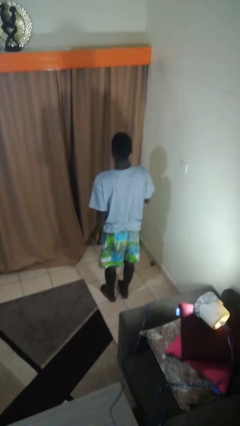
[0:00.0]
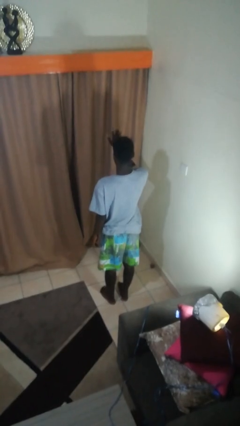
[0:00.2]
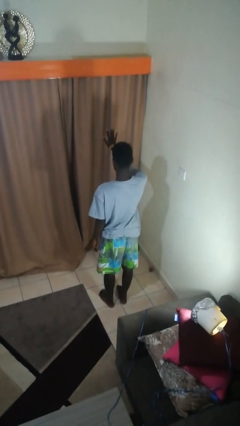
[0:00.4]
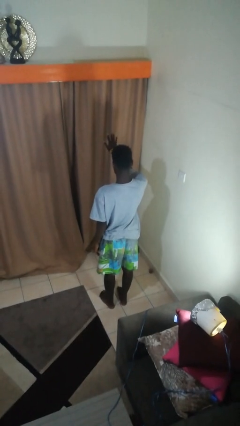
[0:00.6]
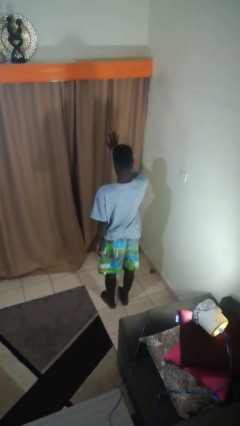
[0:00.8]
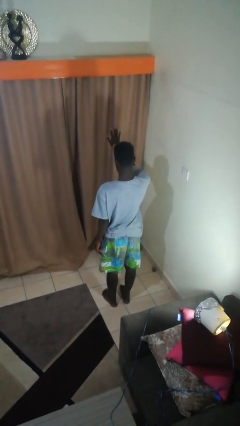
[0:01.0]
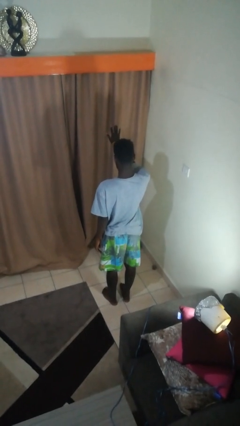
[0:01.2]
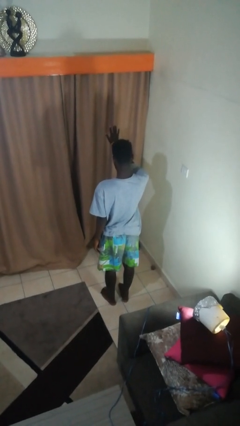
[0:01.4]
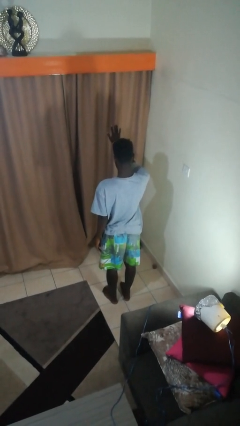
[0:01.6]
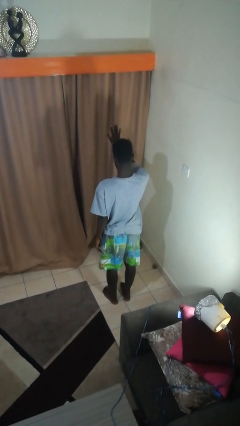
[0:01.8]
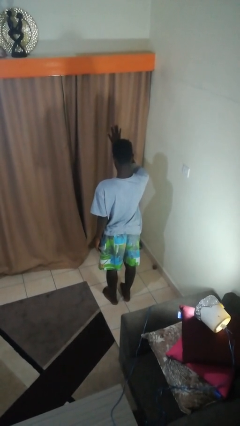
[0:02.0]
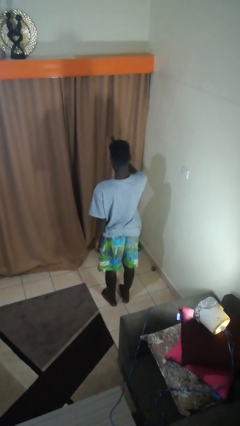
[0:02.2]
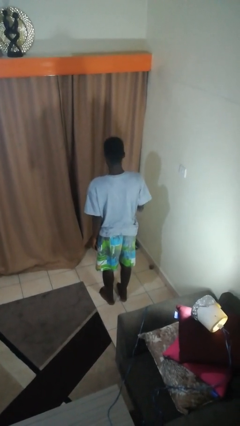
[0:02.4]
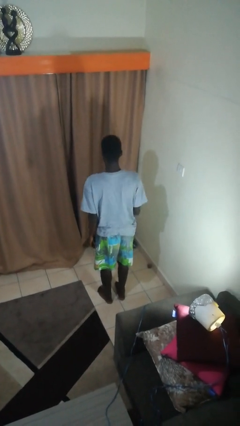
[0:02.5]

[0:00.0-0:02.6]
person gestures number five

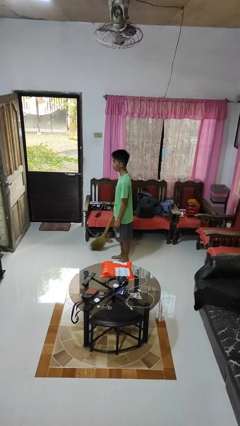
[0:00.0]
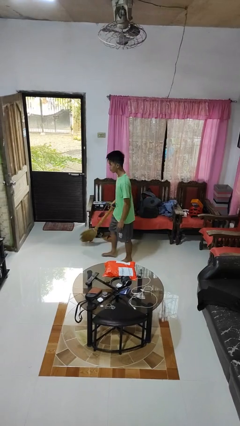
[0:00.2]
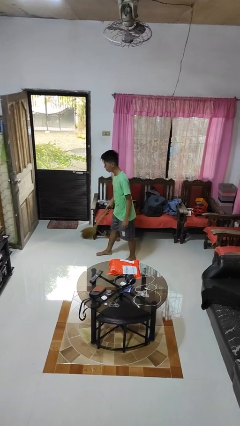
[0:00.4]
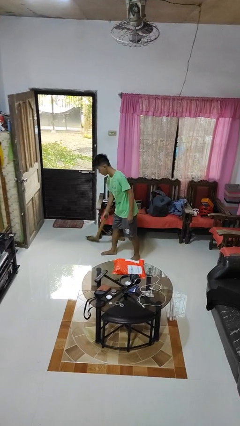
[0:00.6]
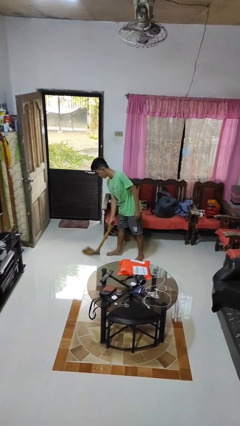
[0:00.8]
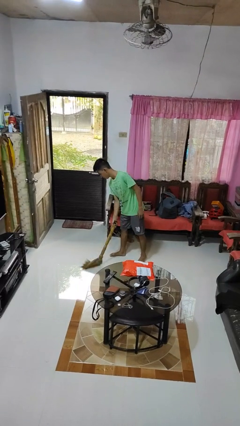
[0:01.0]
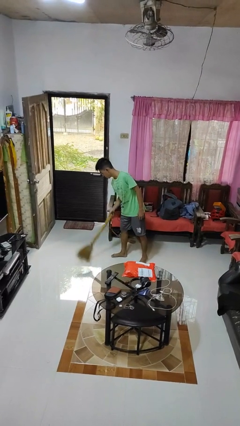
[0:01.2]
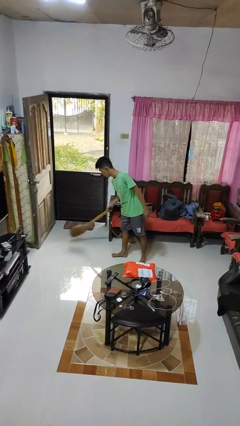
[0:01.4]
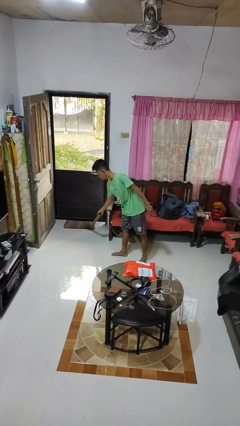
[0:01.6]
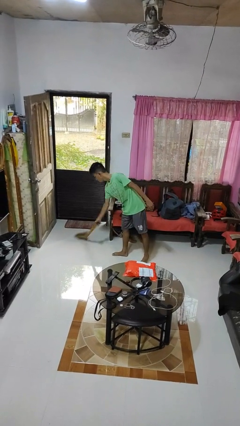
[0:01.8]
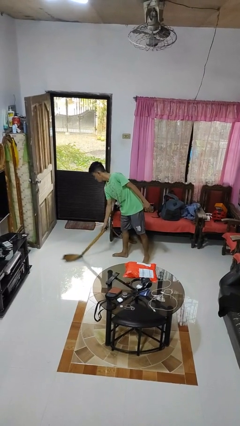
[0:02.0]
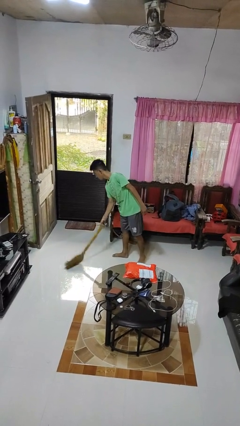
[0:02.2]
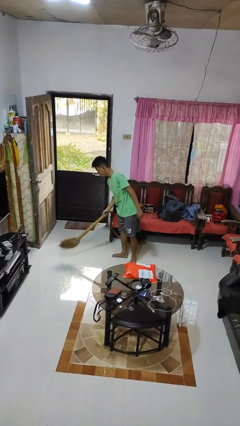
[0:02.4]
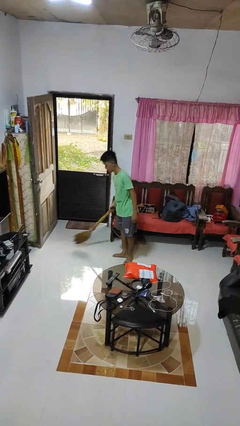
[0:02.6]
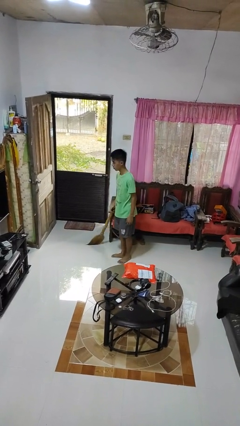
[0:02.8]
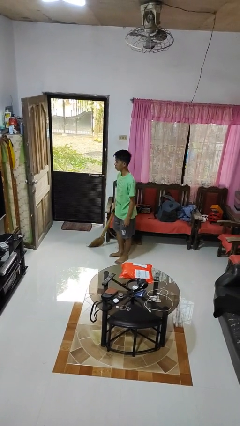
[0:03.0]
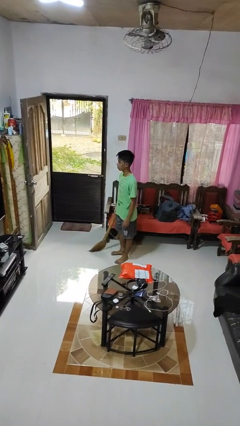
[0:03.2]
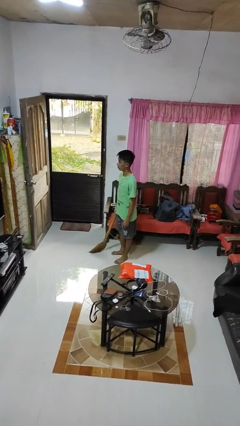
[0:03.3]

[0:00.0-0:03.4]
person sweeps floor

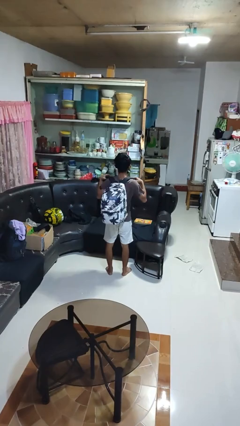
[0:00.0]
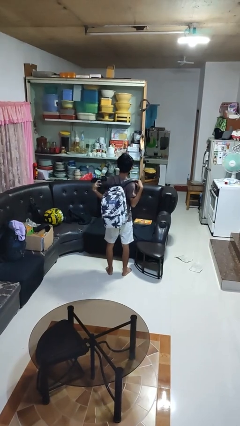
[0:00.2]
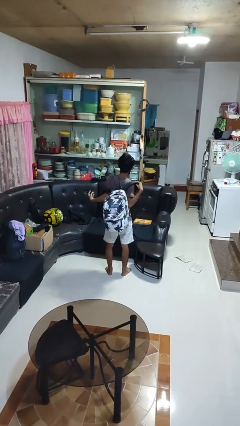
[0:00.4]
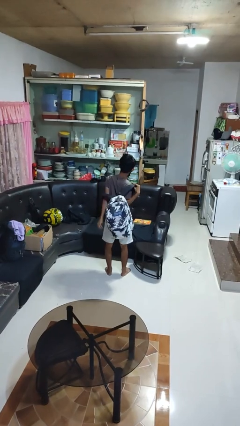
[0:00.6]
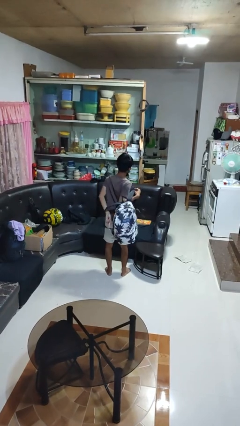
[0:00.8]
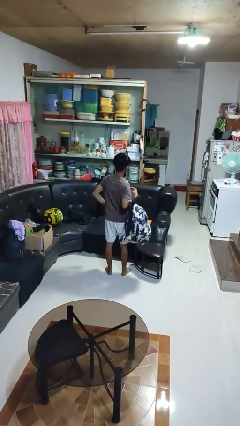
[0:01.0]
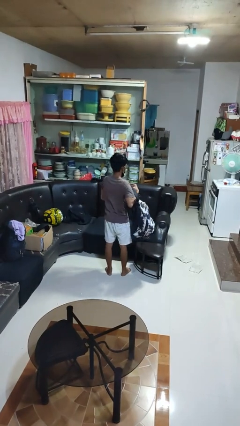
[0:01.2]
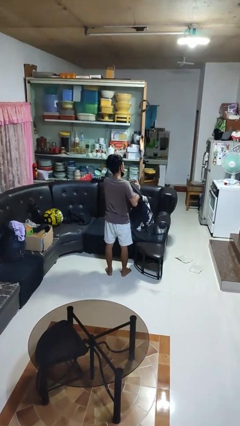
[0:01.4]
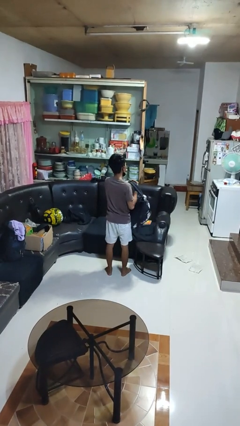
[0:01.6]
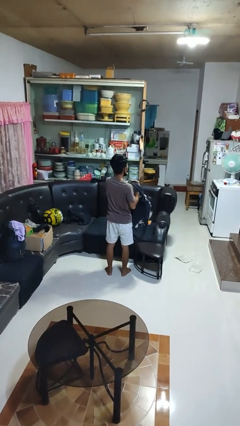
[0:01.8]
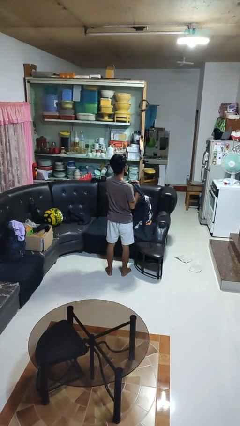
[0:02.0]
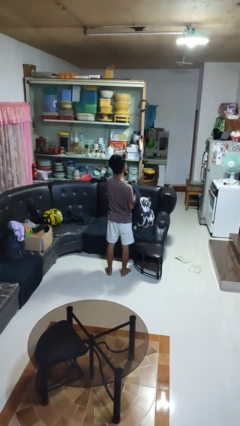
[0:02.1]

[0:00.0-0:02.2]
person takes off backpack

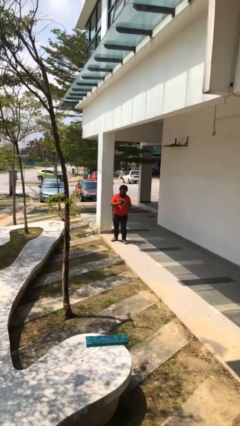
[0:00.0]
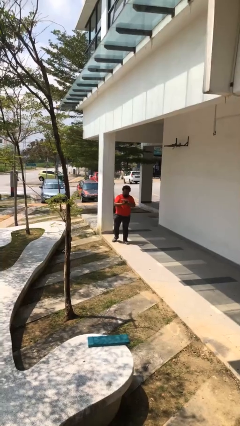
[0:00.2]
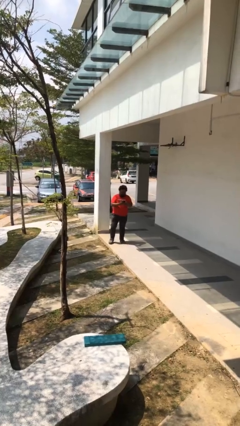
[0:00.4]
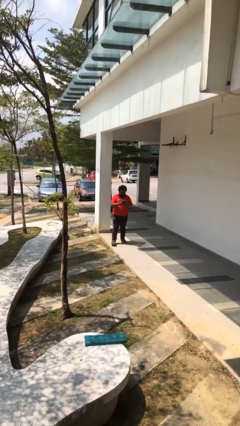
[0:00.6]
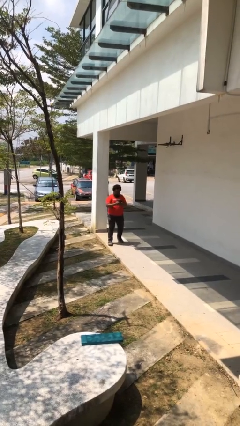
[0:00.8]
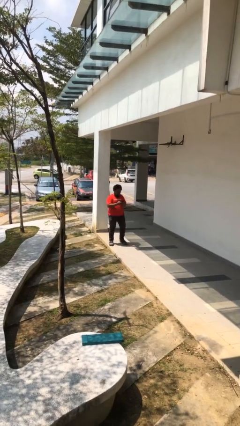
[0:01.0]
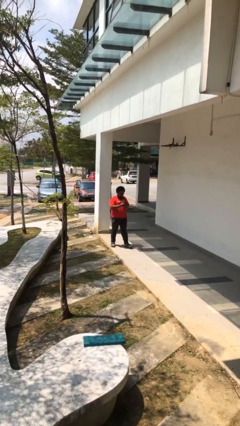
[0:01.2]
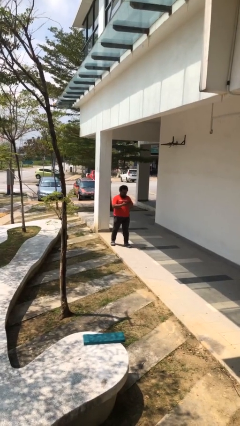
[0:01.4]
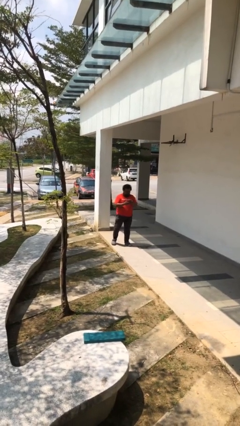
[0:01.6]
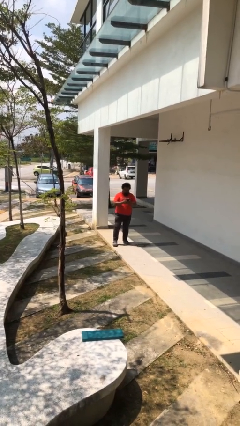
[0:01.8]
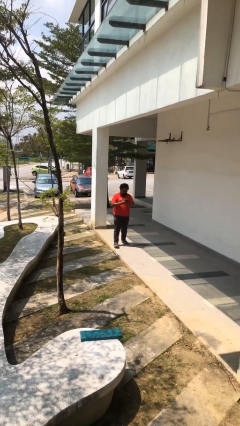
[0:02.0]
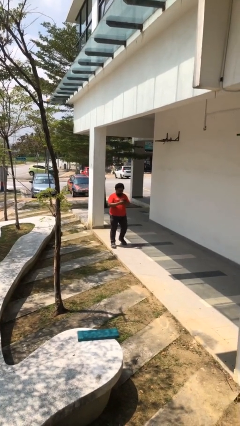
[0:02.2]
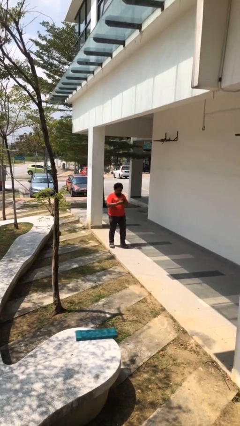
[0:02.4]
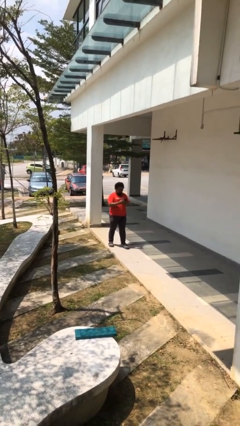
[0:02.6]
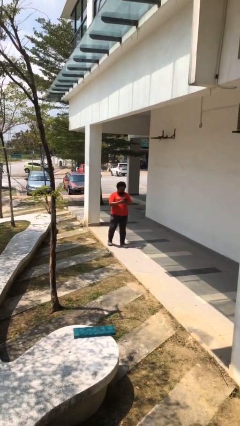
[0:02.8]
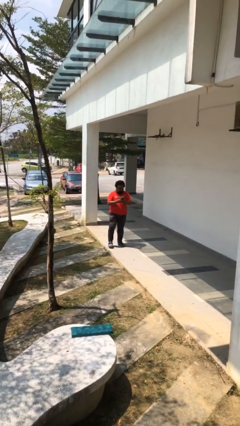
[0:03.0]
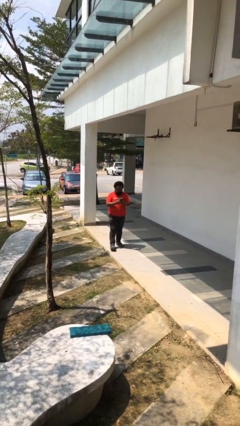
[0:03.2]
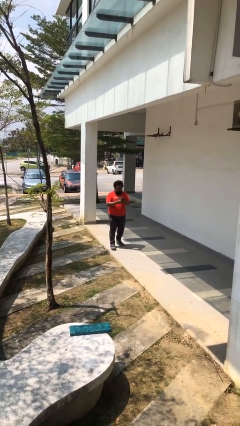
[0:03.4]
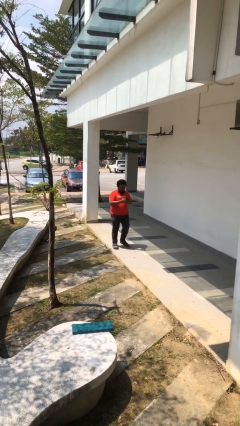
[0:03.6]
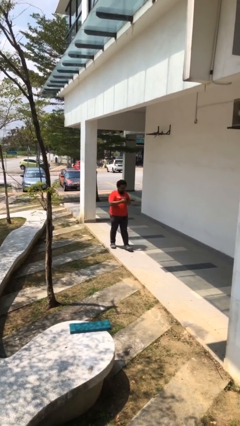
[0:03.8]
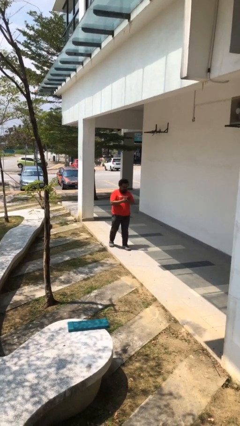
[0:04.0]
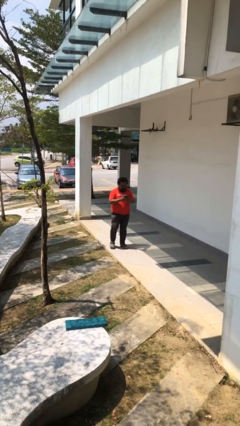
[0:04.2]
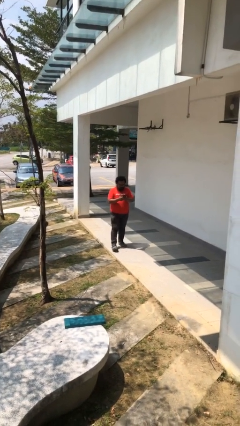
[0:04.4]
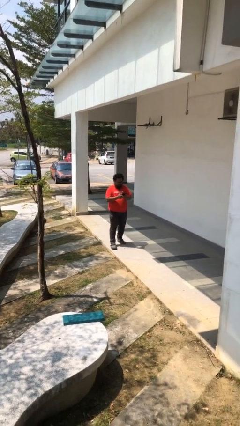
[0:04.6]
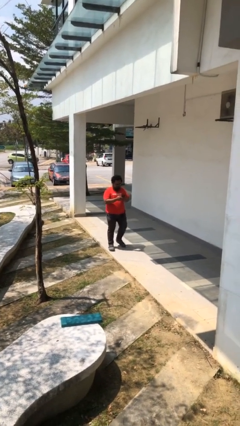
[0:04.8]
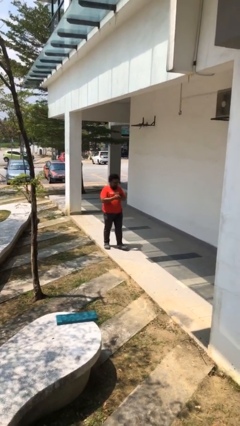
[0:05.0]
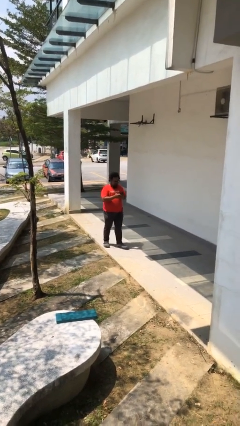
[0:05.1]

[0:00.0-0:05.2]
person texts on phone

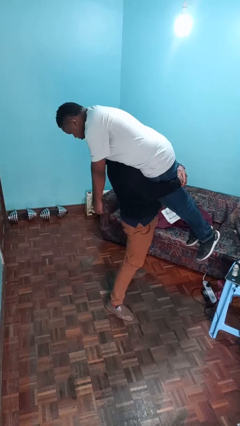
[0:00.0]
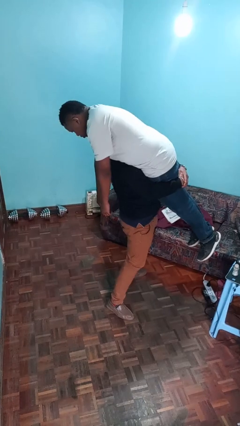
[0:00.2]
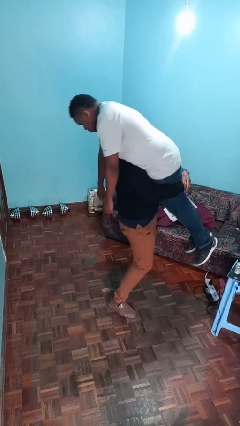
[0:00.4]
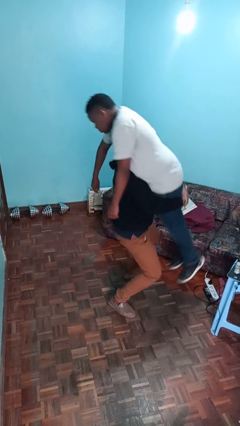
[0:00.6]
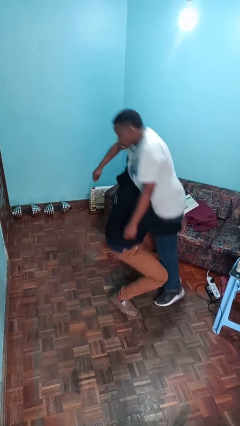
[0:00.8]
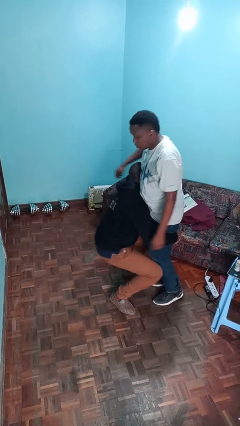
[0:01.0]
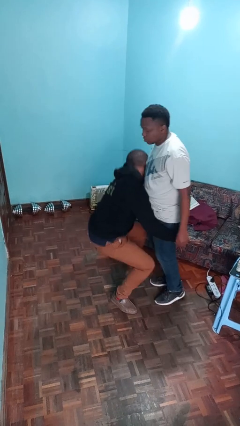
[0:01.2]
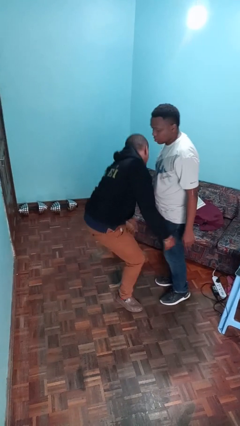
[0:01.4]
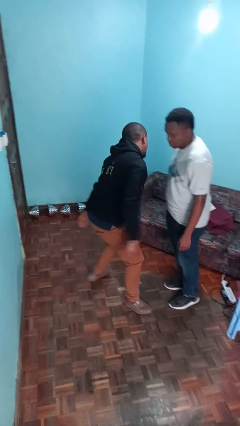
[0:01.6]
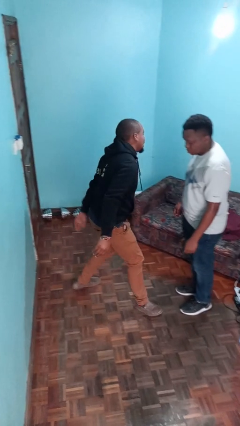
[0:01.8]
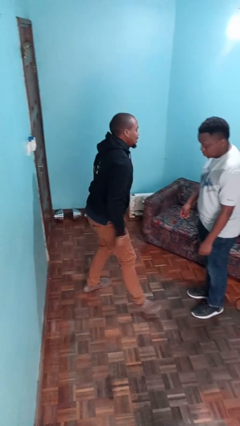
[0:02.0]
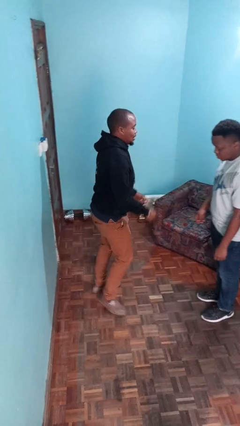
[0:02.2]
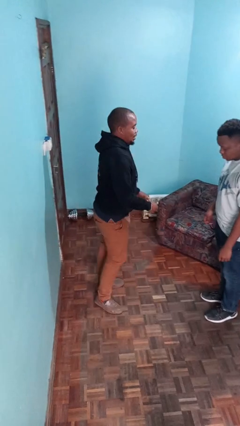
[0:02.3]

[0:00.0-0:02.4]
person puts down person

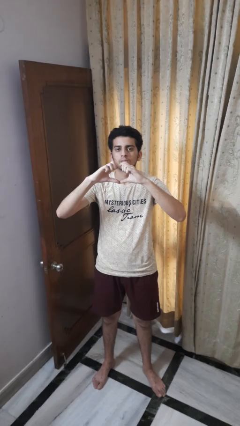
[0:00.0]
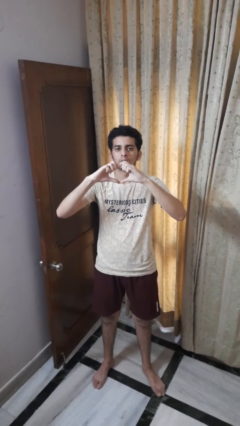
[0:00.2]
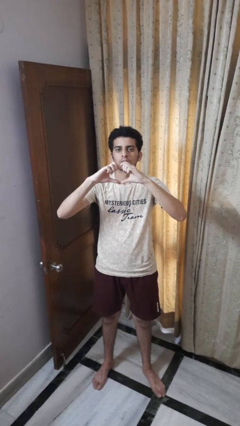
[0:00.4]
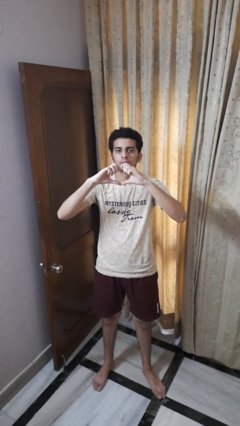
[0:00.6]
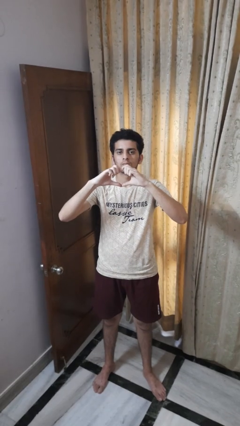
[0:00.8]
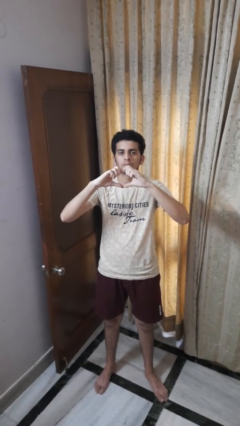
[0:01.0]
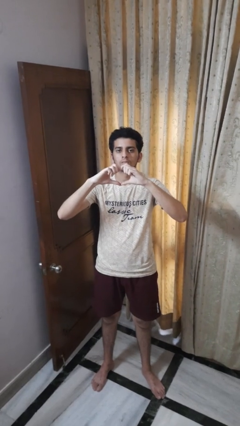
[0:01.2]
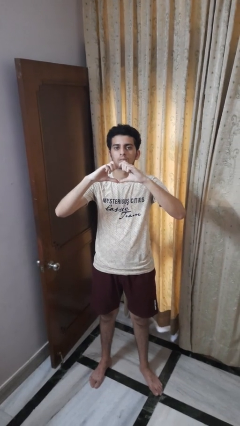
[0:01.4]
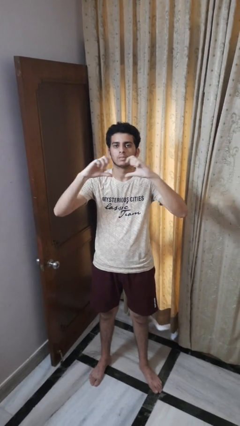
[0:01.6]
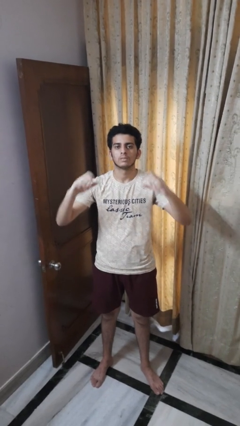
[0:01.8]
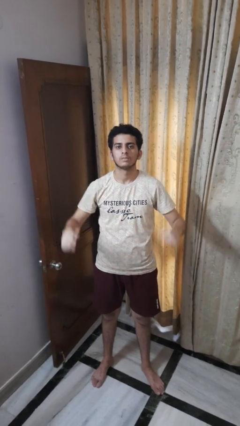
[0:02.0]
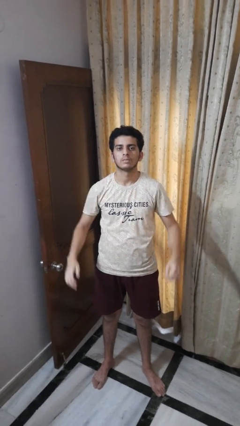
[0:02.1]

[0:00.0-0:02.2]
person gestures heart
